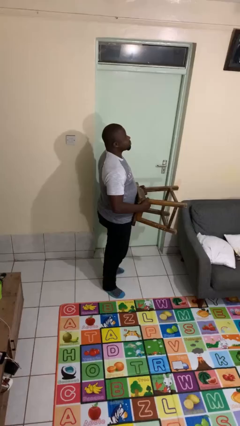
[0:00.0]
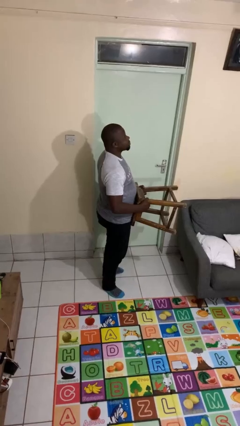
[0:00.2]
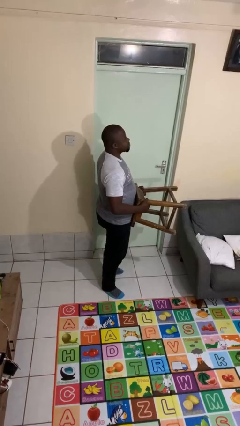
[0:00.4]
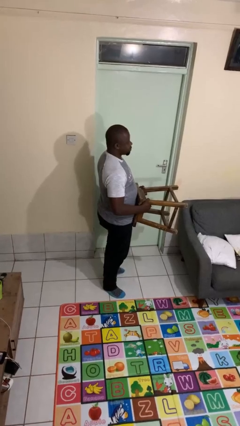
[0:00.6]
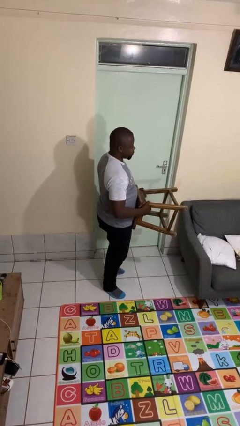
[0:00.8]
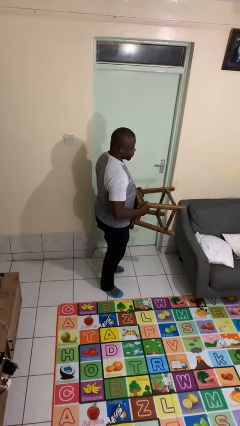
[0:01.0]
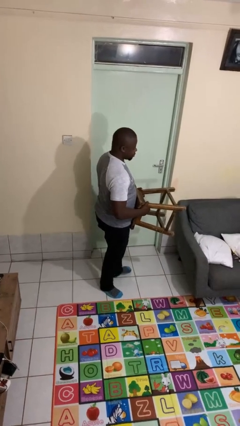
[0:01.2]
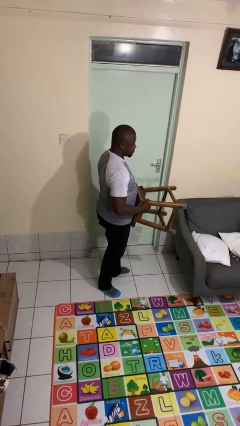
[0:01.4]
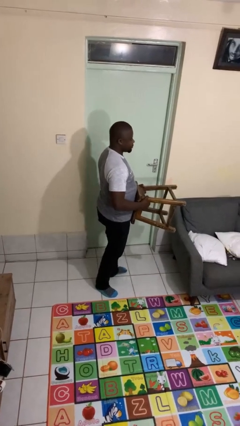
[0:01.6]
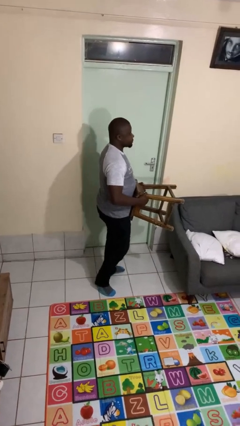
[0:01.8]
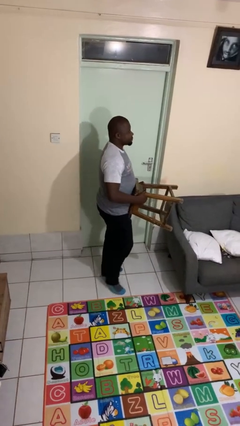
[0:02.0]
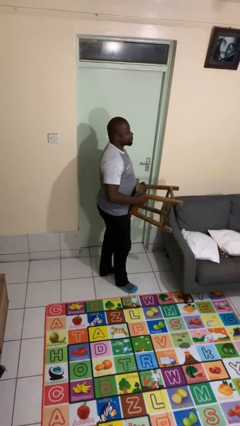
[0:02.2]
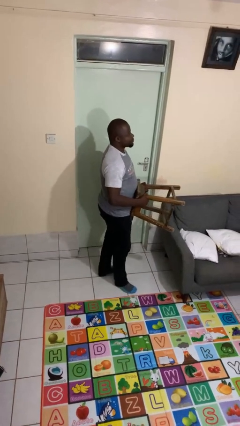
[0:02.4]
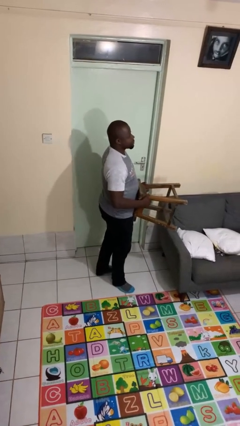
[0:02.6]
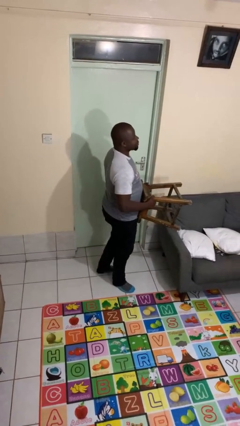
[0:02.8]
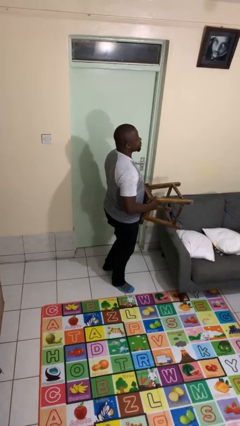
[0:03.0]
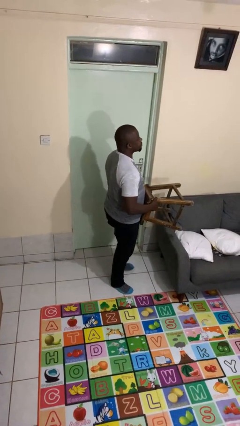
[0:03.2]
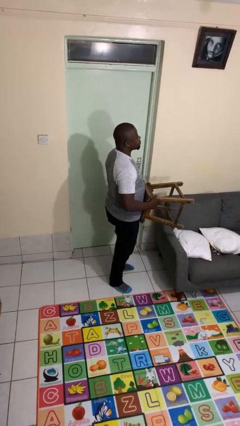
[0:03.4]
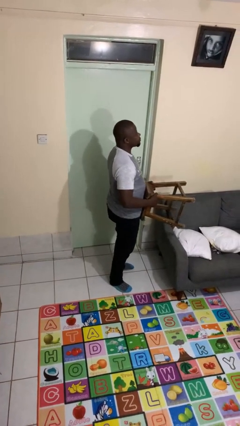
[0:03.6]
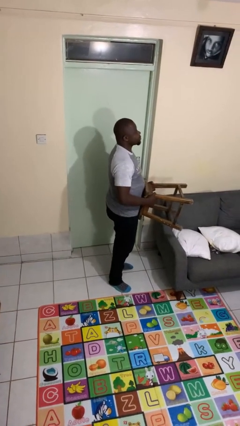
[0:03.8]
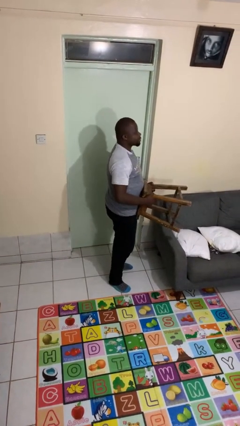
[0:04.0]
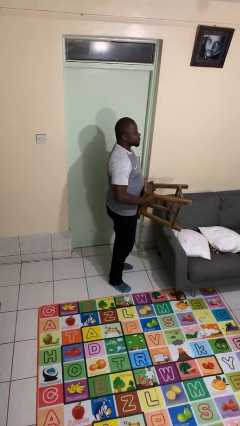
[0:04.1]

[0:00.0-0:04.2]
person carries furniture

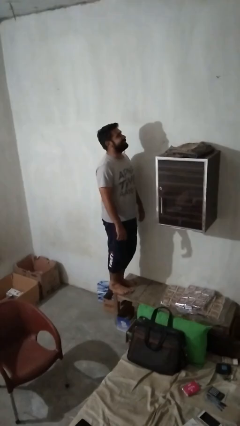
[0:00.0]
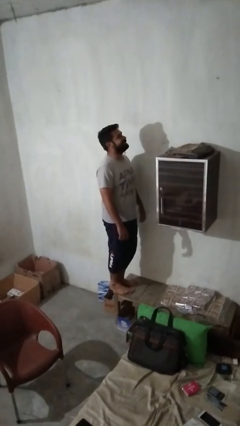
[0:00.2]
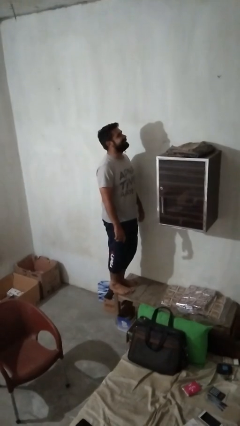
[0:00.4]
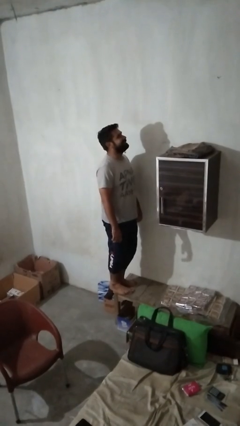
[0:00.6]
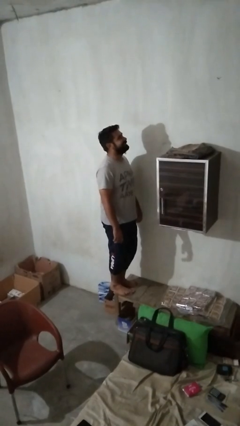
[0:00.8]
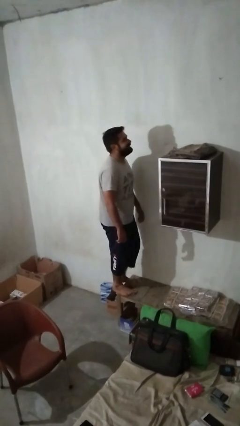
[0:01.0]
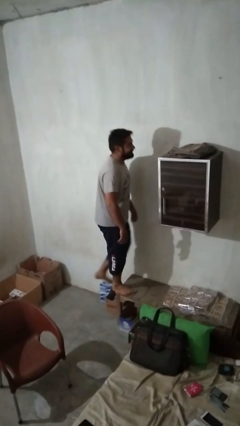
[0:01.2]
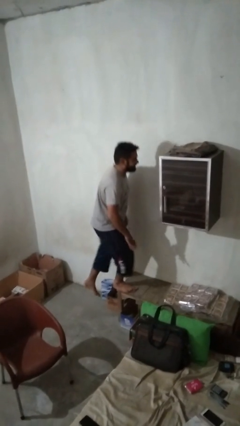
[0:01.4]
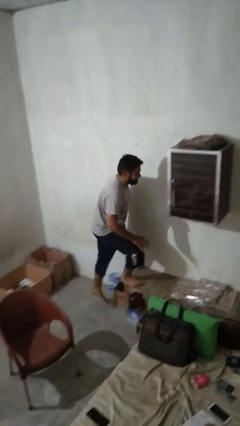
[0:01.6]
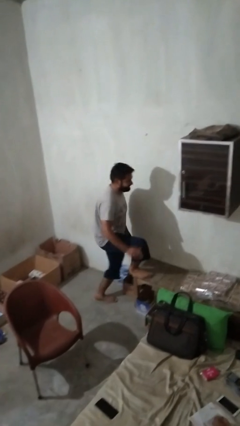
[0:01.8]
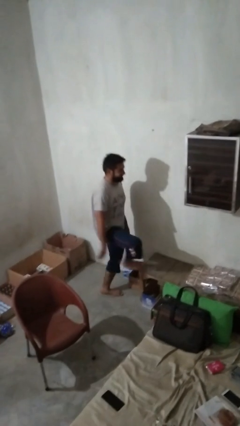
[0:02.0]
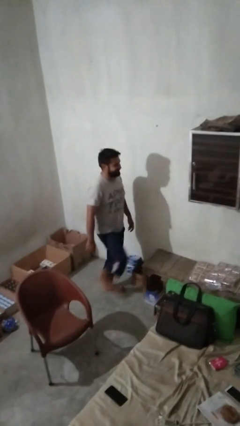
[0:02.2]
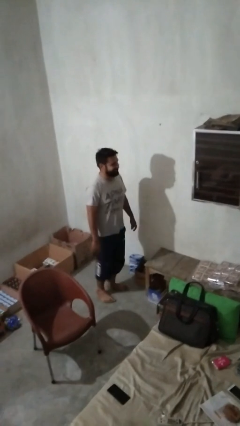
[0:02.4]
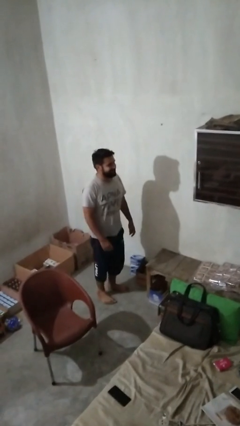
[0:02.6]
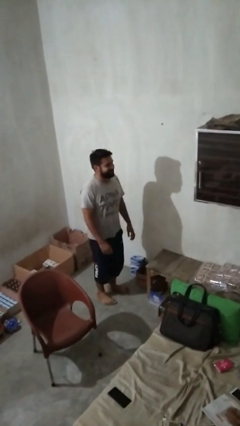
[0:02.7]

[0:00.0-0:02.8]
person climbs off table

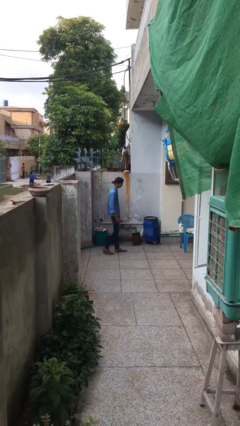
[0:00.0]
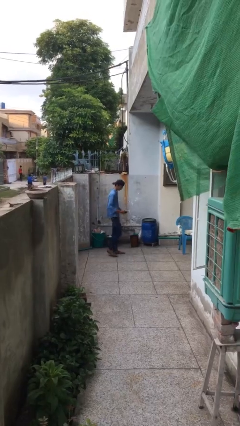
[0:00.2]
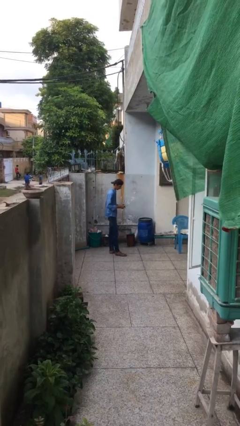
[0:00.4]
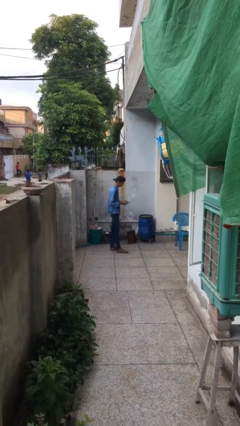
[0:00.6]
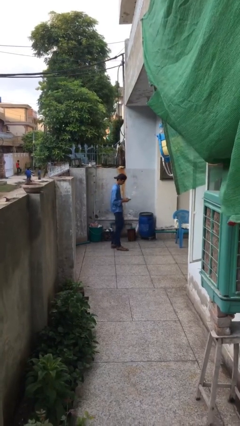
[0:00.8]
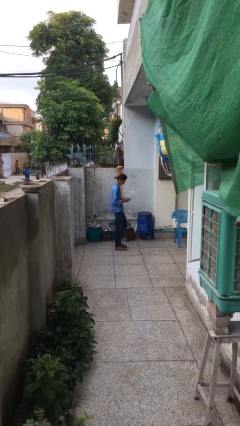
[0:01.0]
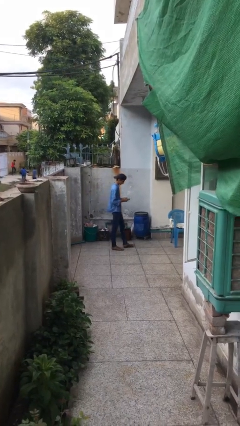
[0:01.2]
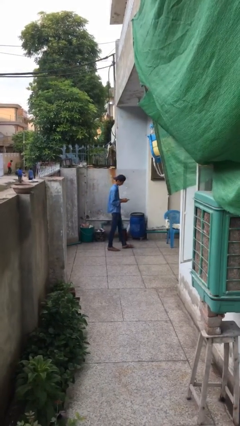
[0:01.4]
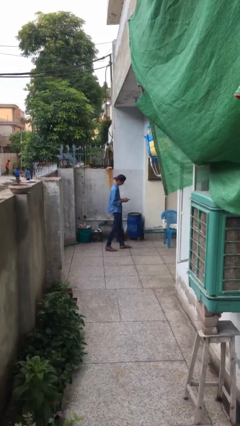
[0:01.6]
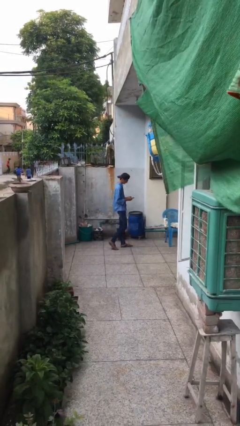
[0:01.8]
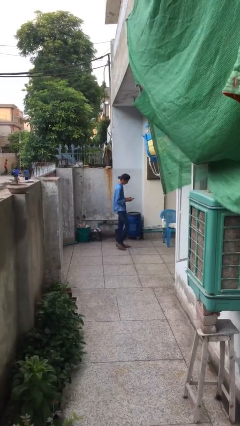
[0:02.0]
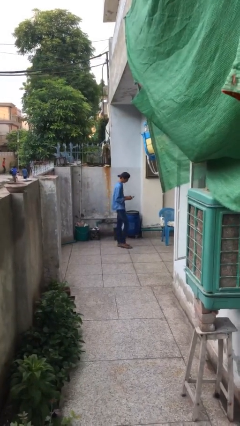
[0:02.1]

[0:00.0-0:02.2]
person texts on phone

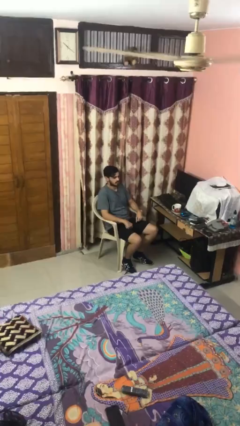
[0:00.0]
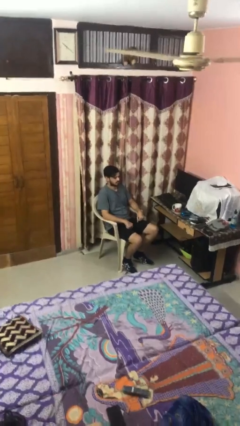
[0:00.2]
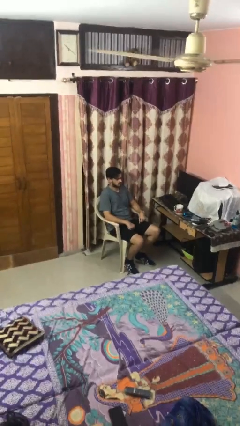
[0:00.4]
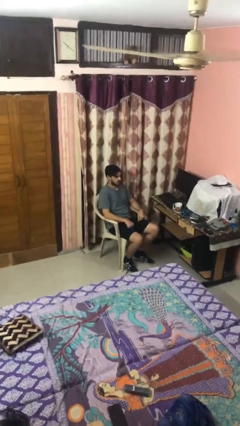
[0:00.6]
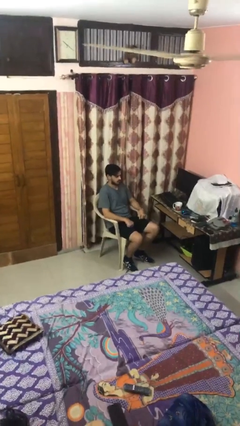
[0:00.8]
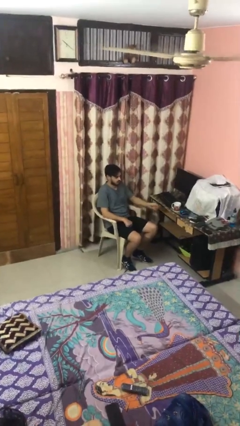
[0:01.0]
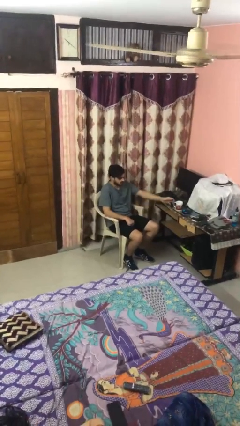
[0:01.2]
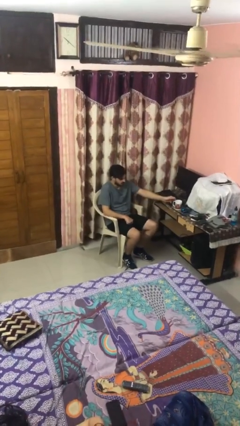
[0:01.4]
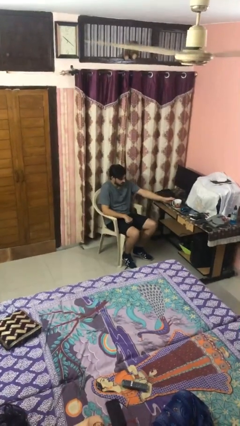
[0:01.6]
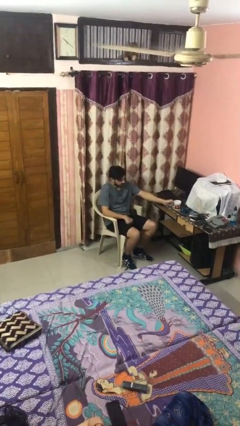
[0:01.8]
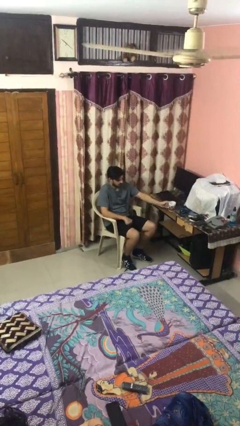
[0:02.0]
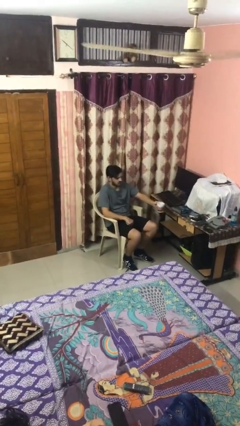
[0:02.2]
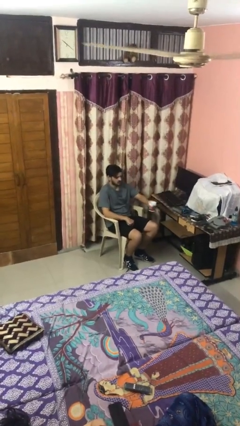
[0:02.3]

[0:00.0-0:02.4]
person picks up object from table

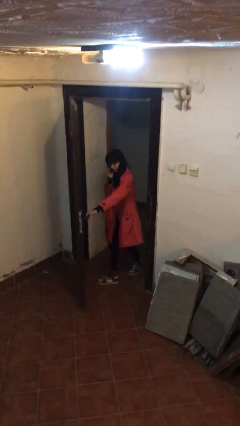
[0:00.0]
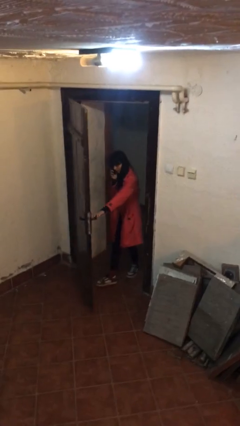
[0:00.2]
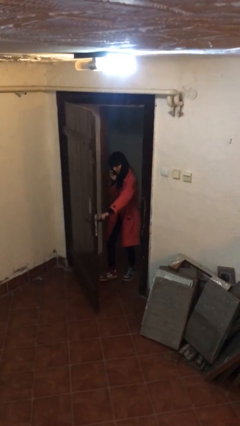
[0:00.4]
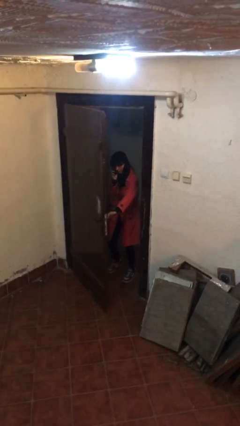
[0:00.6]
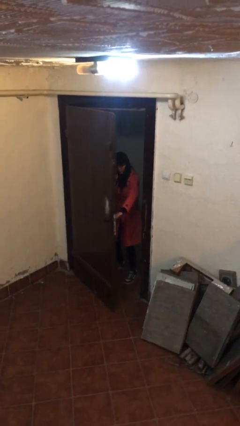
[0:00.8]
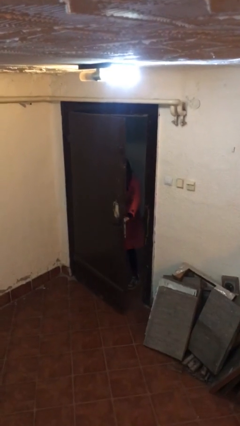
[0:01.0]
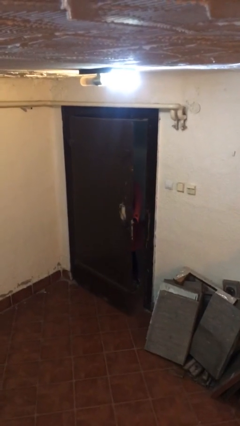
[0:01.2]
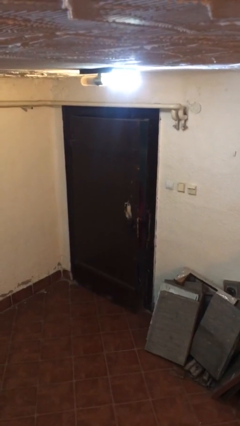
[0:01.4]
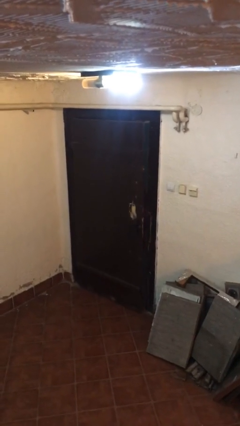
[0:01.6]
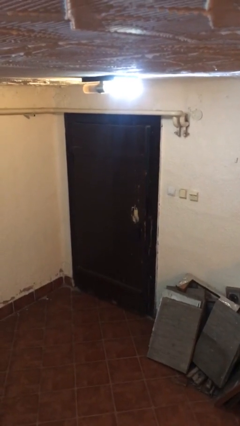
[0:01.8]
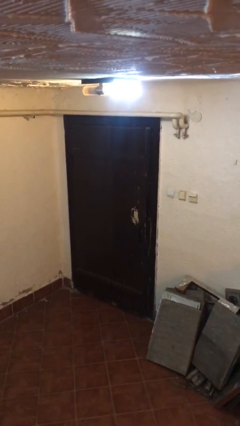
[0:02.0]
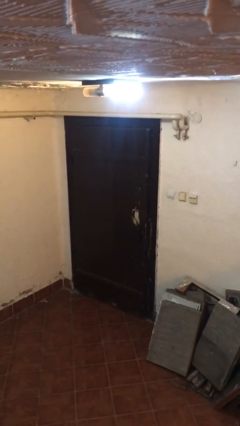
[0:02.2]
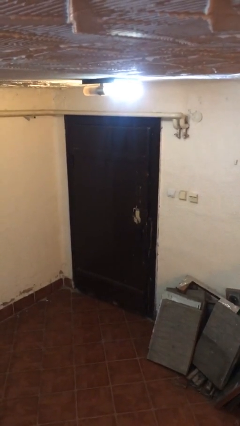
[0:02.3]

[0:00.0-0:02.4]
person closes facility door

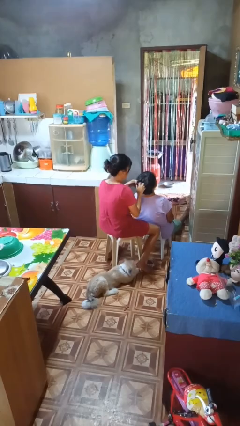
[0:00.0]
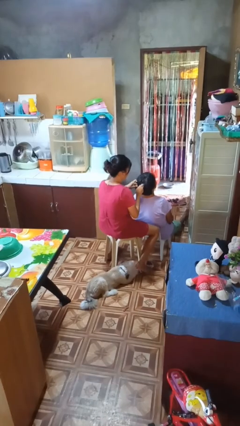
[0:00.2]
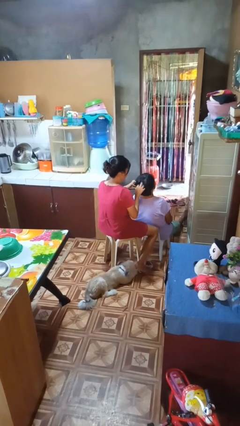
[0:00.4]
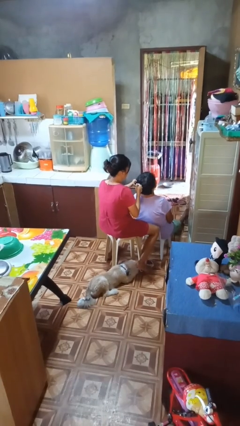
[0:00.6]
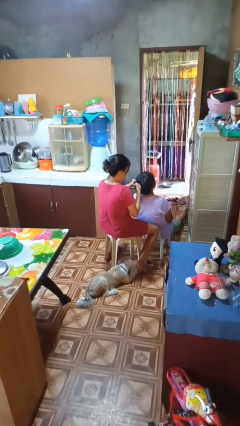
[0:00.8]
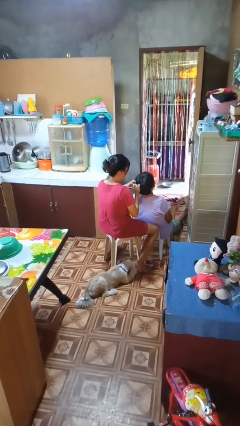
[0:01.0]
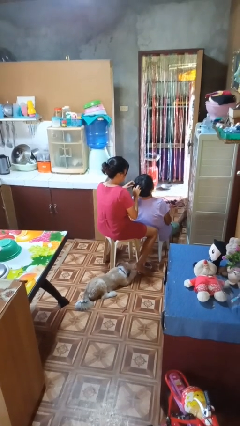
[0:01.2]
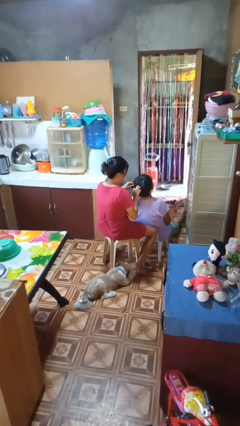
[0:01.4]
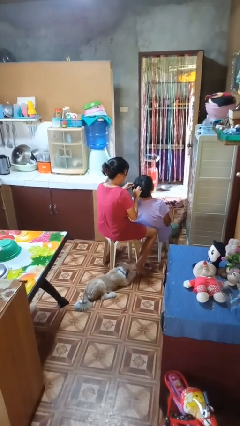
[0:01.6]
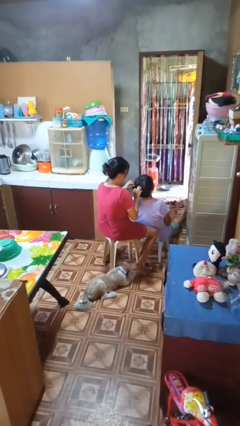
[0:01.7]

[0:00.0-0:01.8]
person braids hair of person

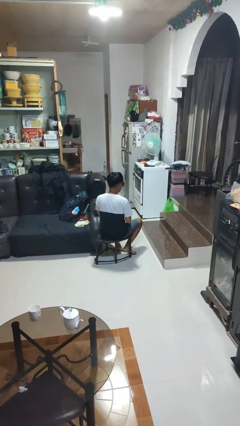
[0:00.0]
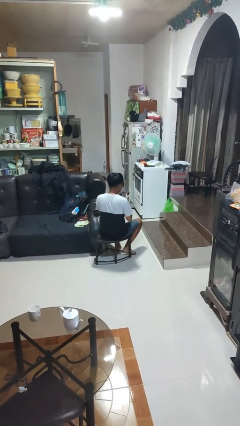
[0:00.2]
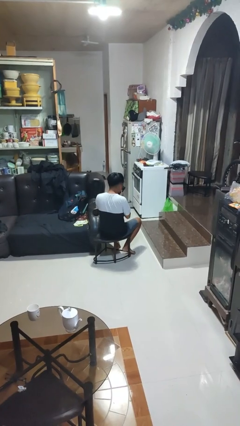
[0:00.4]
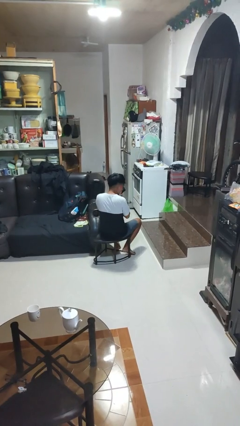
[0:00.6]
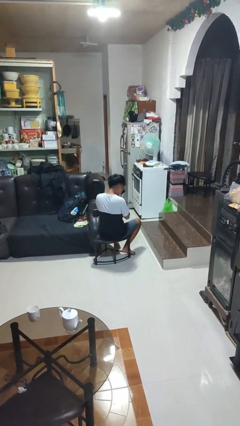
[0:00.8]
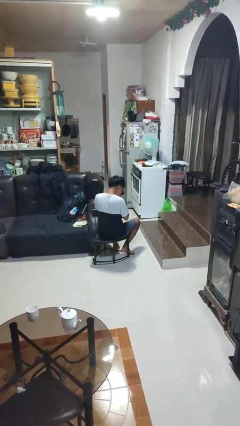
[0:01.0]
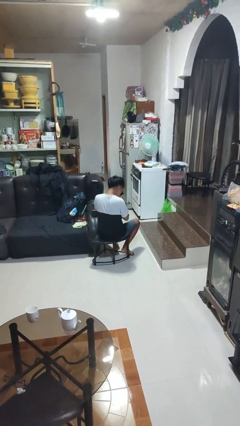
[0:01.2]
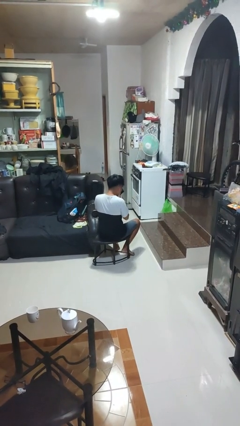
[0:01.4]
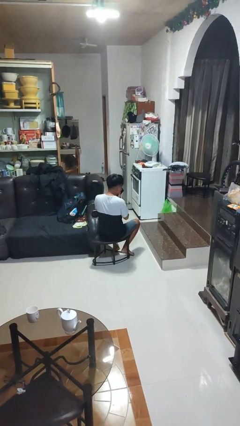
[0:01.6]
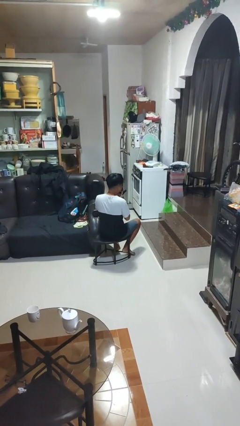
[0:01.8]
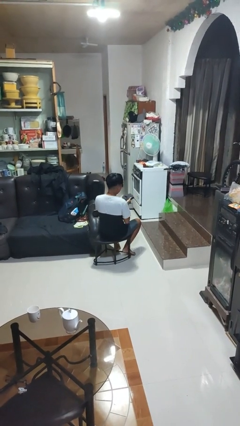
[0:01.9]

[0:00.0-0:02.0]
person blows nose
